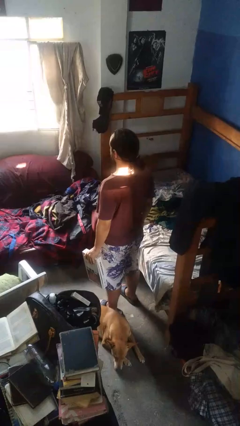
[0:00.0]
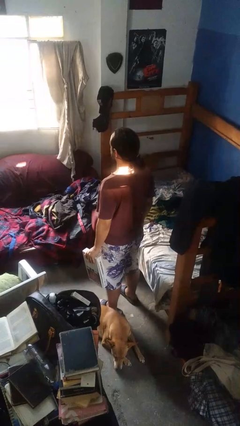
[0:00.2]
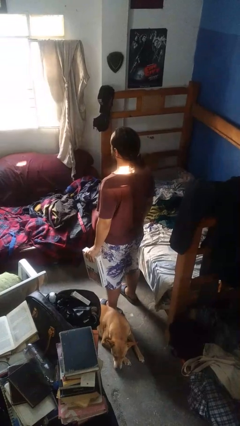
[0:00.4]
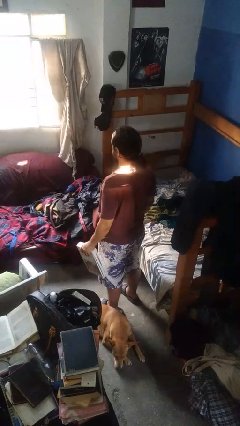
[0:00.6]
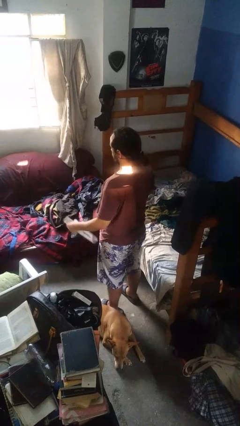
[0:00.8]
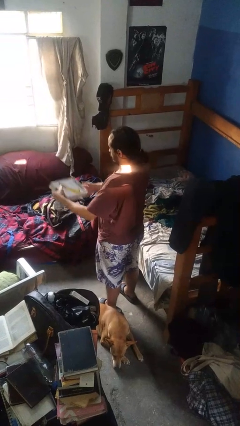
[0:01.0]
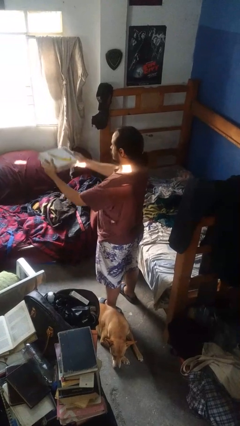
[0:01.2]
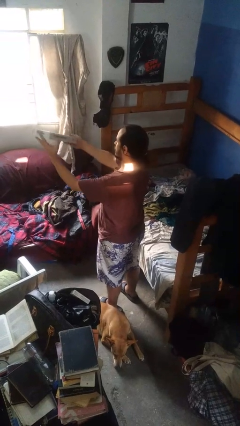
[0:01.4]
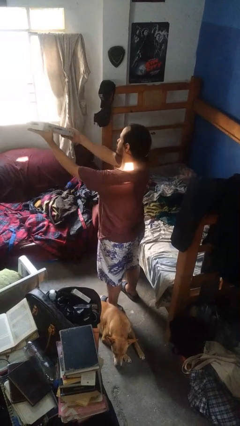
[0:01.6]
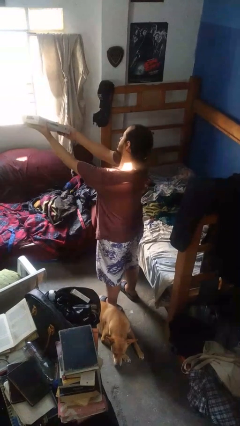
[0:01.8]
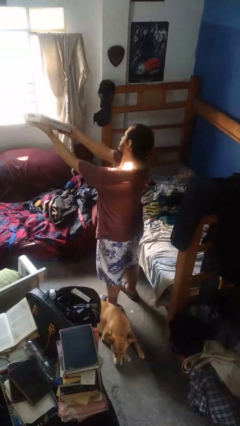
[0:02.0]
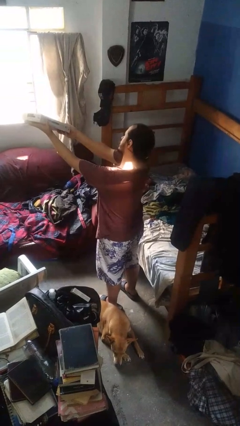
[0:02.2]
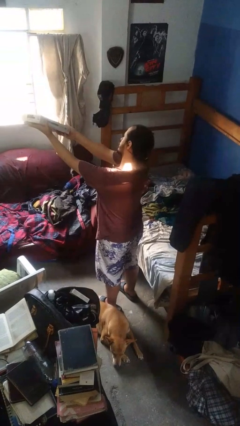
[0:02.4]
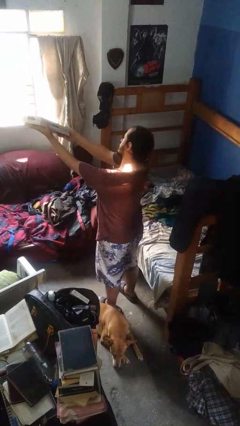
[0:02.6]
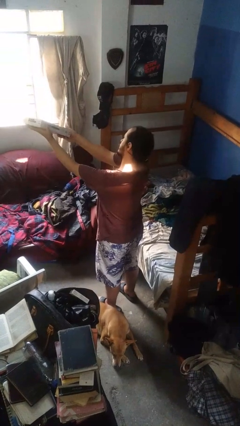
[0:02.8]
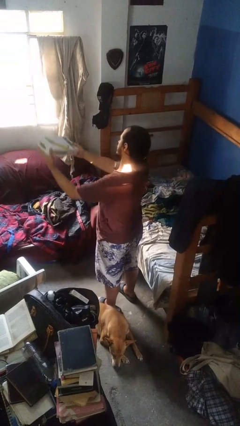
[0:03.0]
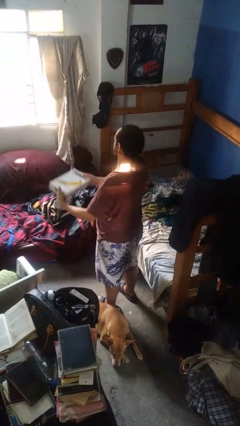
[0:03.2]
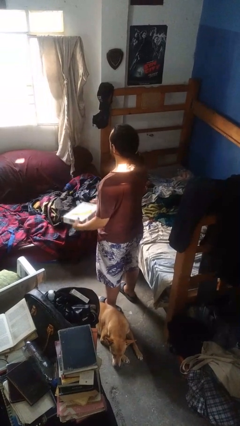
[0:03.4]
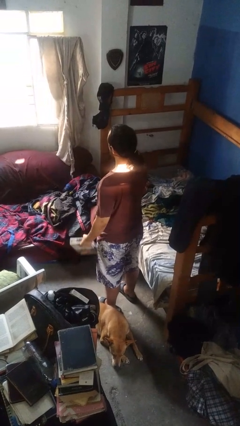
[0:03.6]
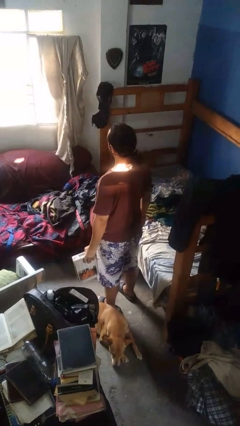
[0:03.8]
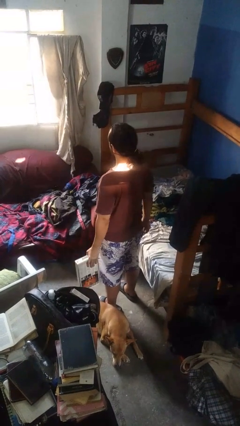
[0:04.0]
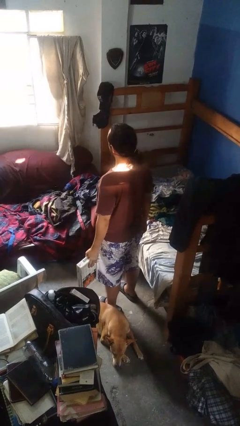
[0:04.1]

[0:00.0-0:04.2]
person holds object above head

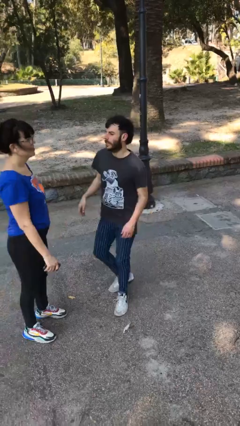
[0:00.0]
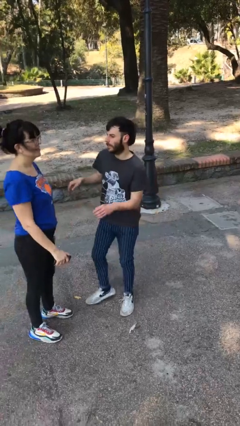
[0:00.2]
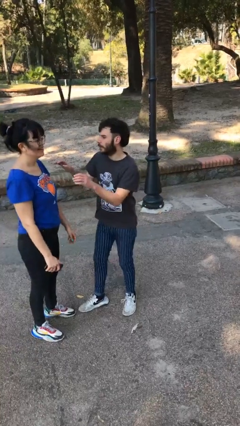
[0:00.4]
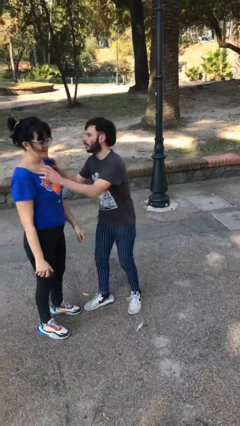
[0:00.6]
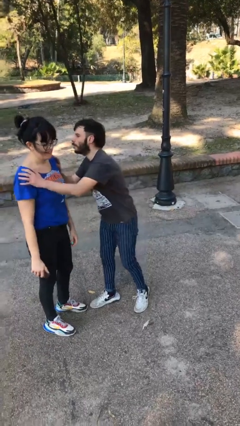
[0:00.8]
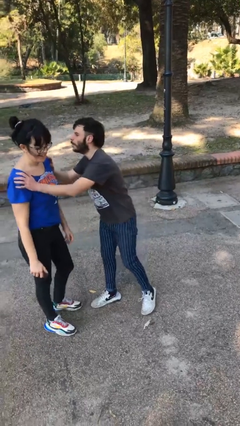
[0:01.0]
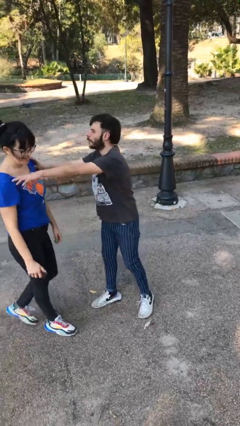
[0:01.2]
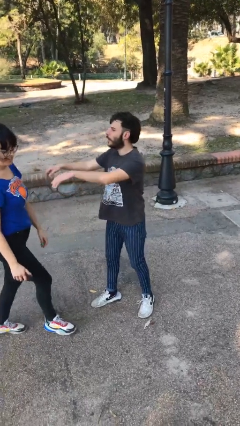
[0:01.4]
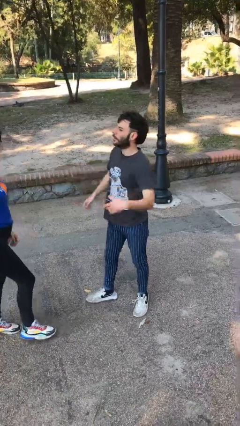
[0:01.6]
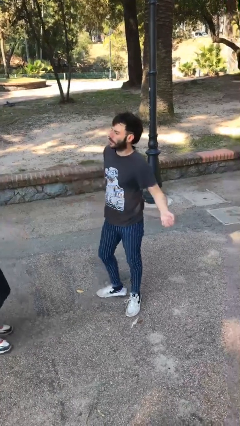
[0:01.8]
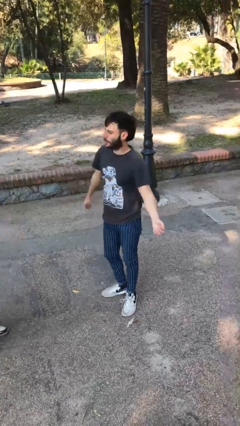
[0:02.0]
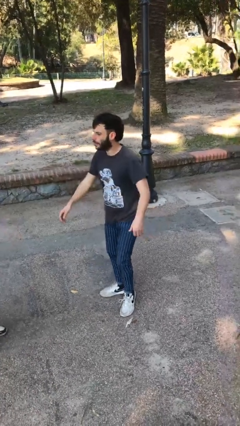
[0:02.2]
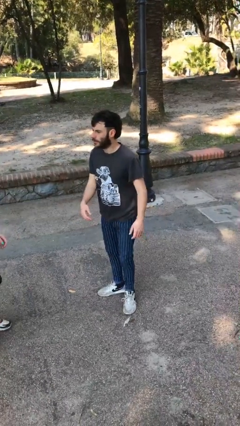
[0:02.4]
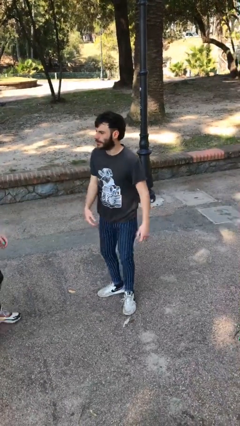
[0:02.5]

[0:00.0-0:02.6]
person shoves person

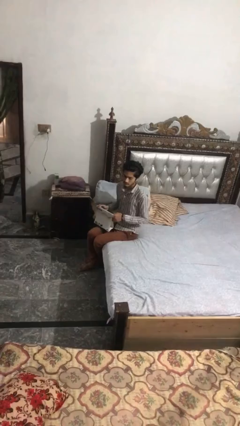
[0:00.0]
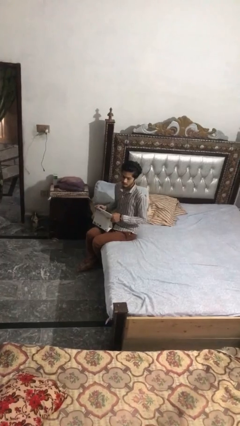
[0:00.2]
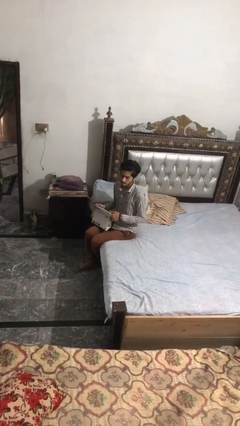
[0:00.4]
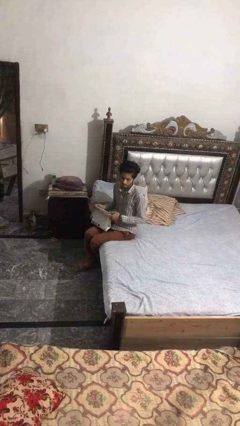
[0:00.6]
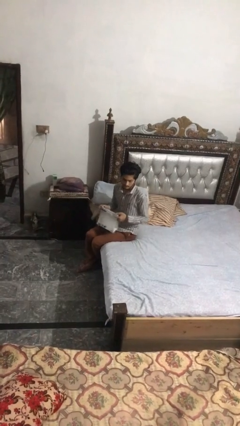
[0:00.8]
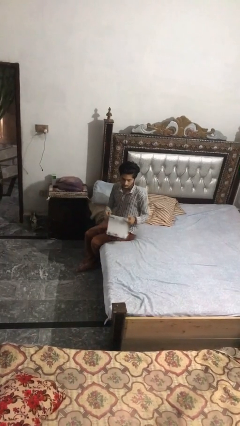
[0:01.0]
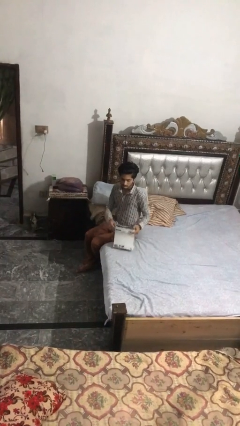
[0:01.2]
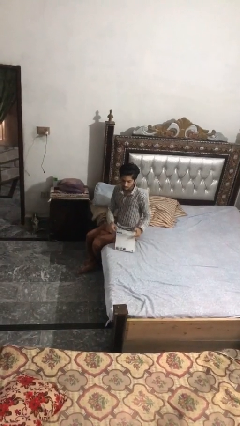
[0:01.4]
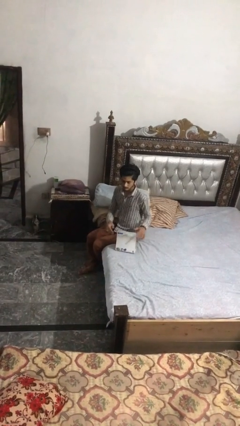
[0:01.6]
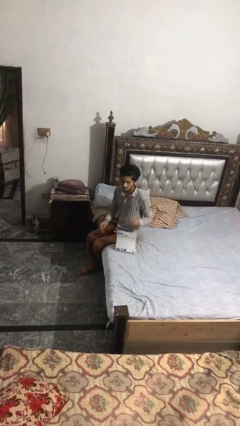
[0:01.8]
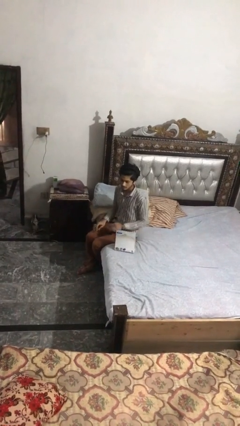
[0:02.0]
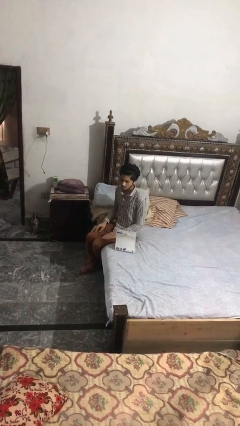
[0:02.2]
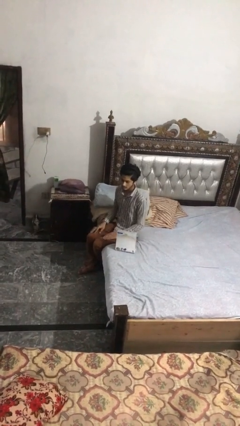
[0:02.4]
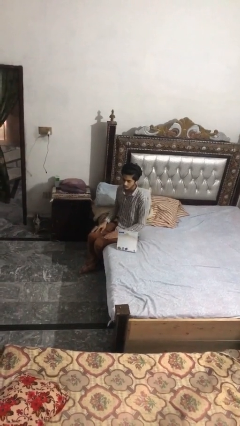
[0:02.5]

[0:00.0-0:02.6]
person puts down object on bed

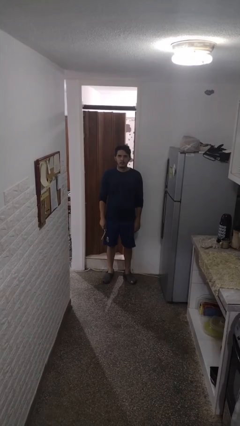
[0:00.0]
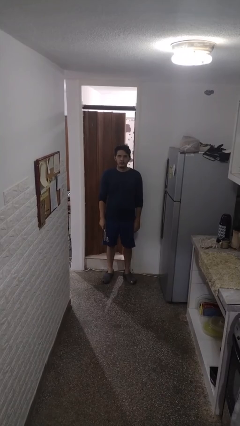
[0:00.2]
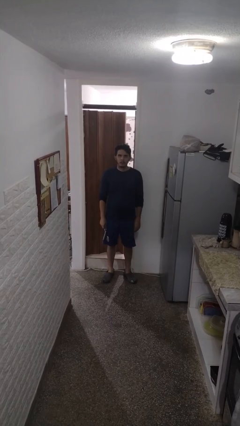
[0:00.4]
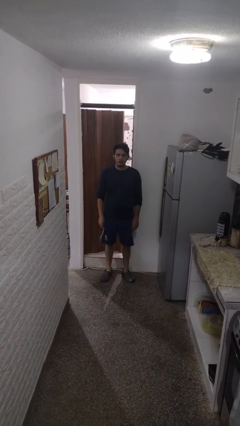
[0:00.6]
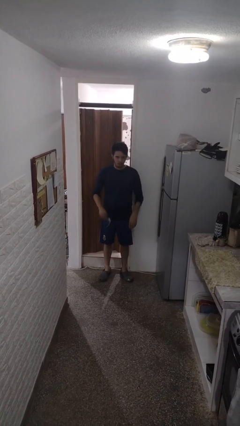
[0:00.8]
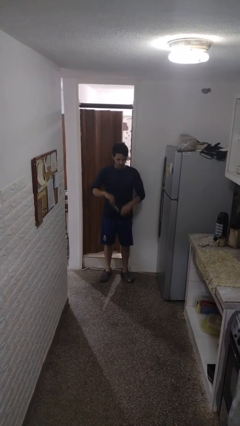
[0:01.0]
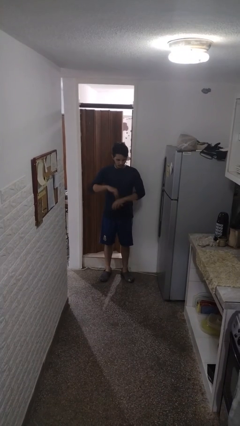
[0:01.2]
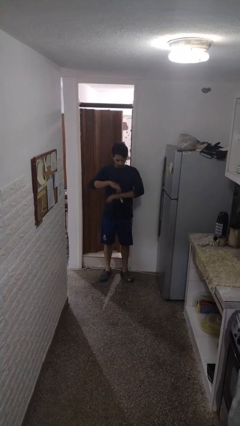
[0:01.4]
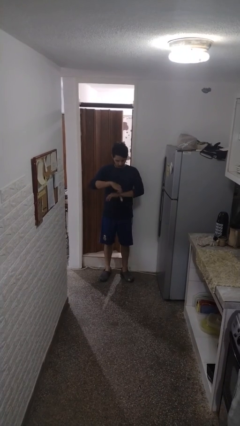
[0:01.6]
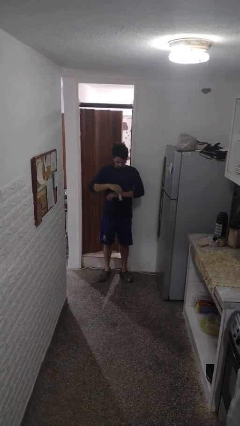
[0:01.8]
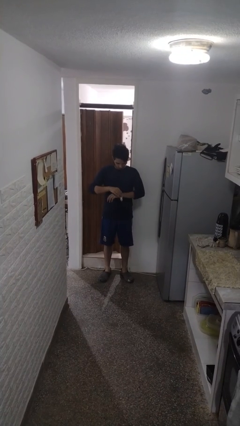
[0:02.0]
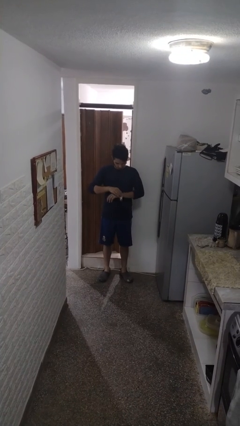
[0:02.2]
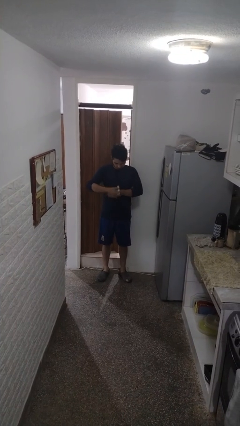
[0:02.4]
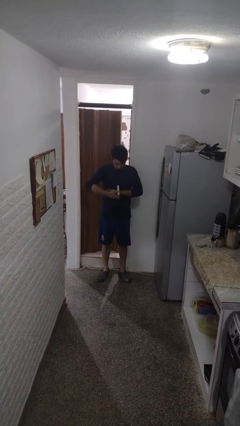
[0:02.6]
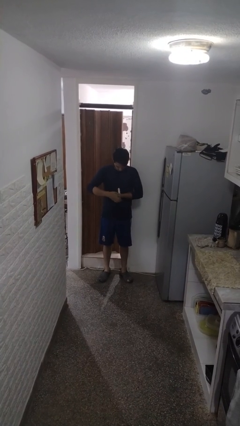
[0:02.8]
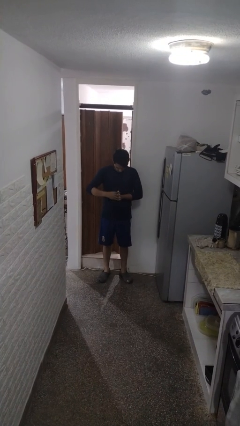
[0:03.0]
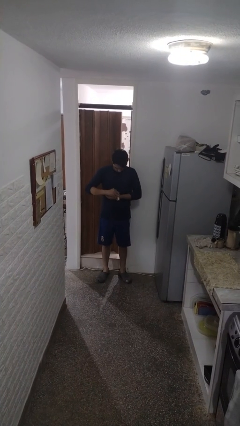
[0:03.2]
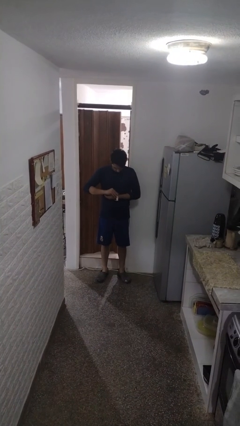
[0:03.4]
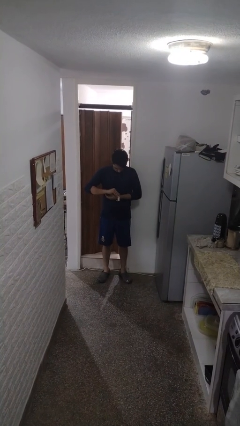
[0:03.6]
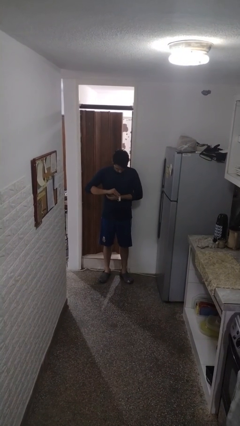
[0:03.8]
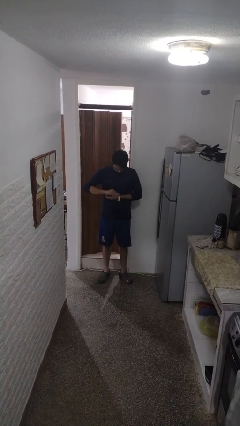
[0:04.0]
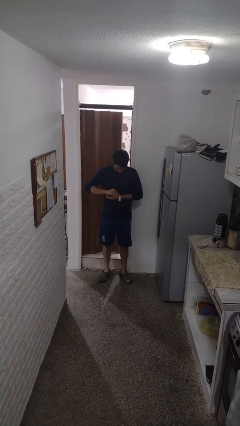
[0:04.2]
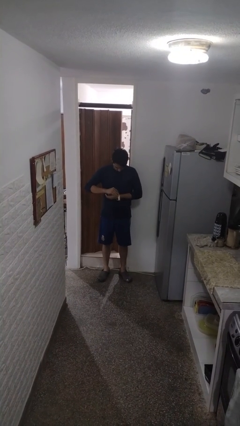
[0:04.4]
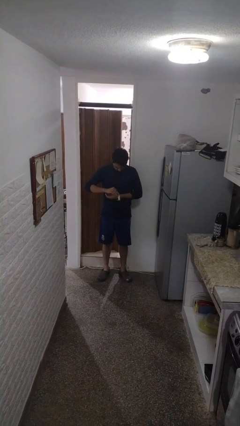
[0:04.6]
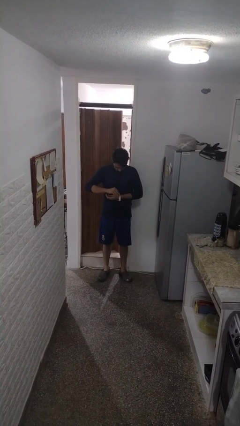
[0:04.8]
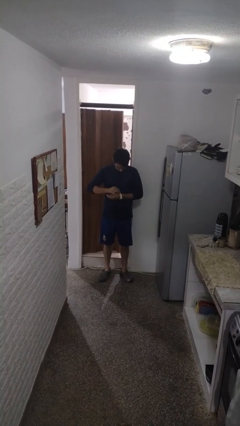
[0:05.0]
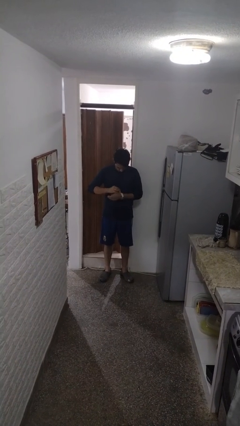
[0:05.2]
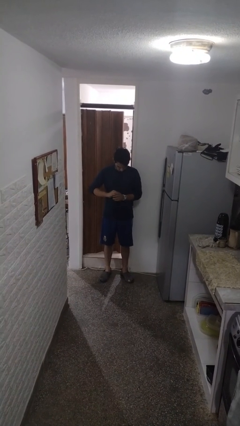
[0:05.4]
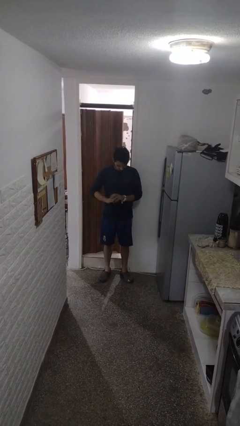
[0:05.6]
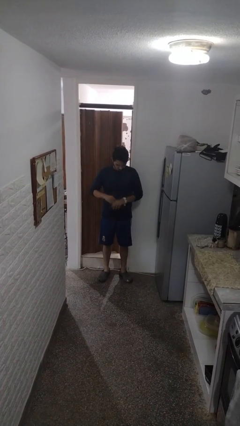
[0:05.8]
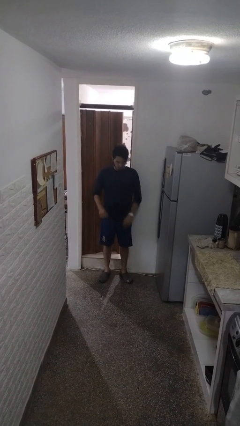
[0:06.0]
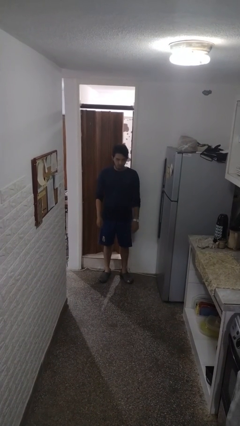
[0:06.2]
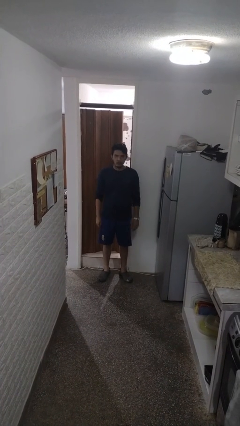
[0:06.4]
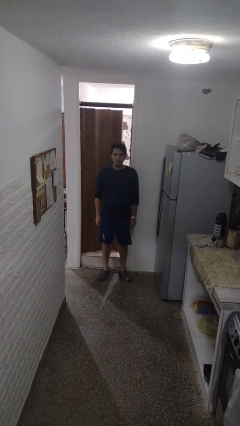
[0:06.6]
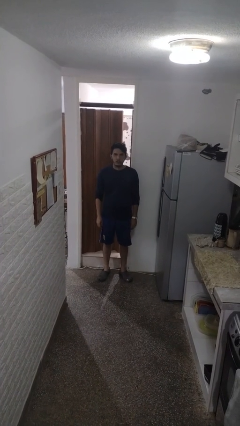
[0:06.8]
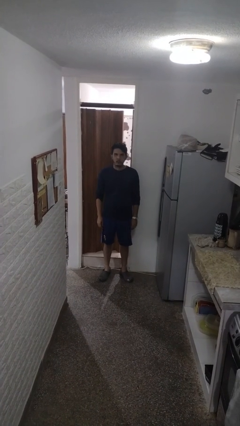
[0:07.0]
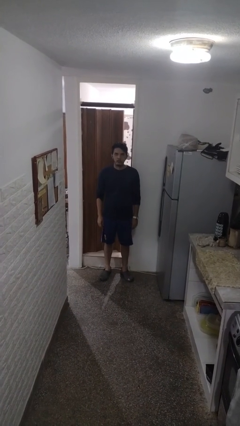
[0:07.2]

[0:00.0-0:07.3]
person puts on wristwatch

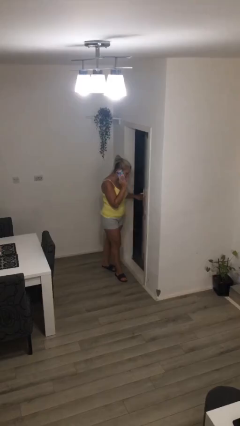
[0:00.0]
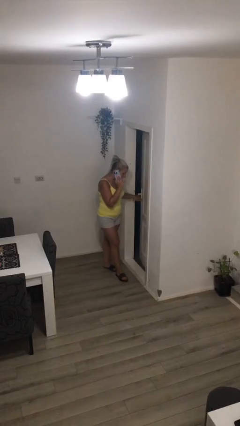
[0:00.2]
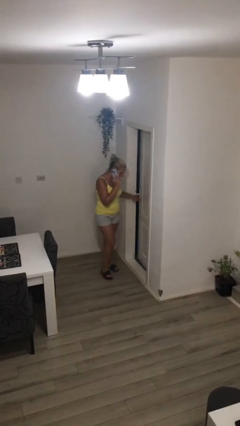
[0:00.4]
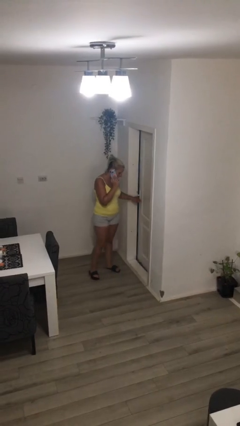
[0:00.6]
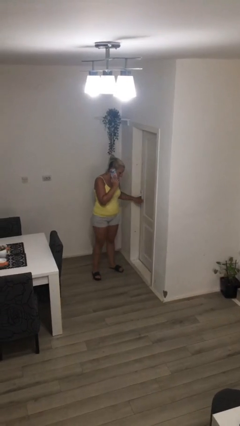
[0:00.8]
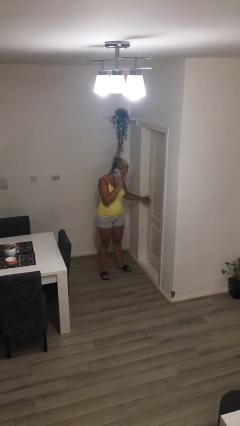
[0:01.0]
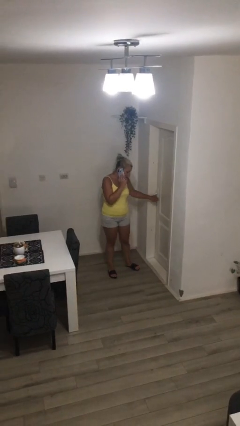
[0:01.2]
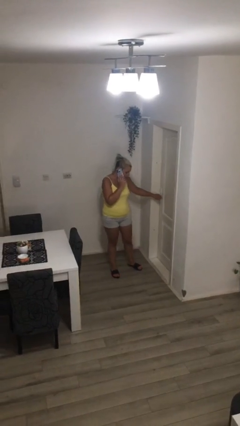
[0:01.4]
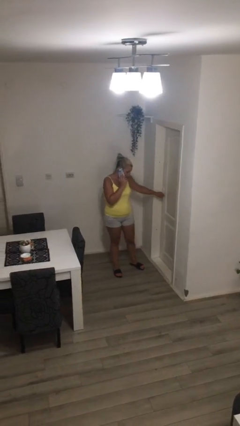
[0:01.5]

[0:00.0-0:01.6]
person closes facility door
